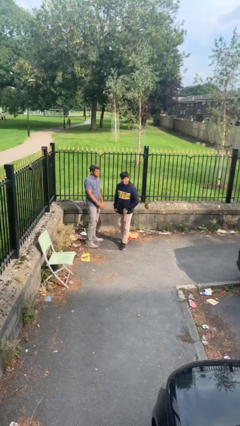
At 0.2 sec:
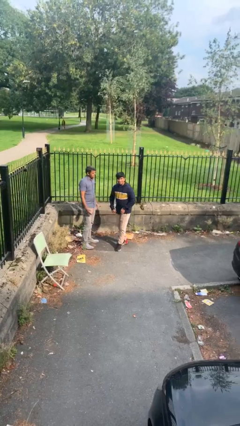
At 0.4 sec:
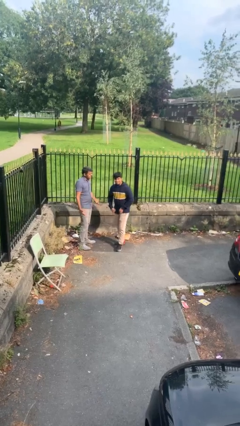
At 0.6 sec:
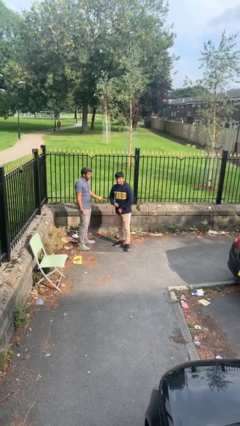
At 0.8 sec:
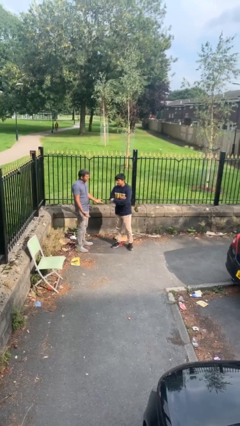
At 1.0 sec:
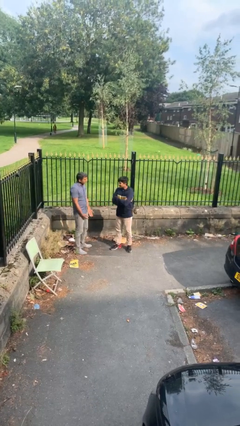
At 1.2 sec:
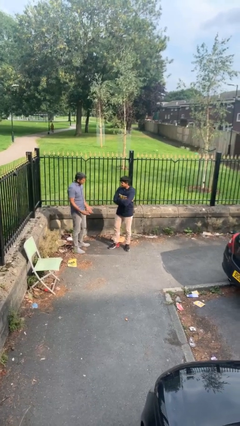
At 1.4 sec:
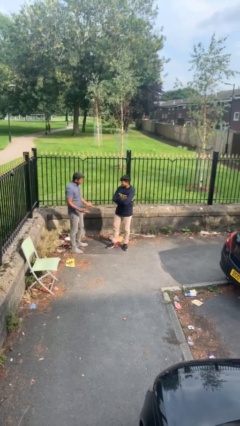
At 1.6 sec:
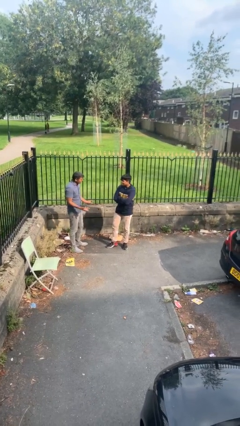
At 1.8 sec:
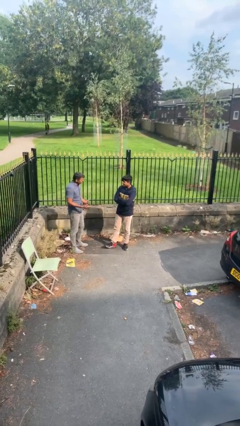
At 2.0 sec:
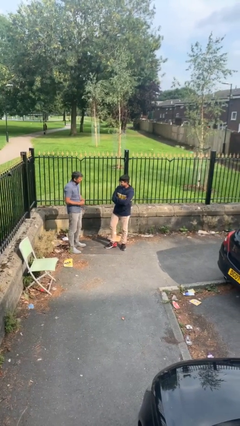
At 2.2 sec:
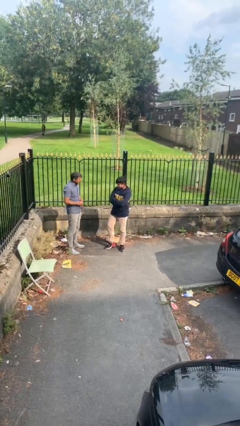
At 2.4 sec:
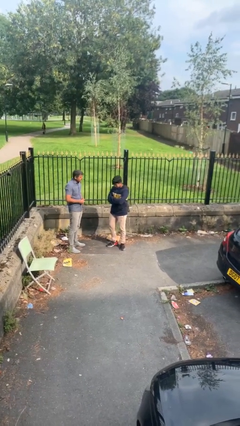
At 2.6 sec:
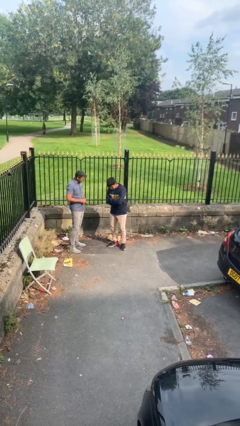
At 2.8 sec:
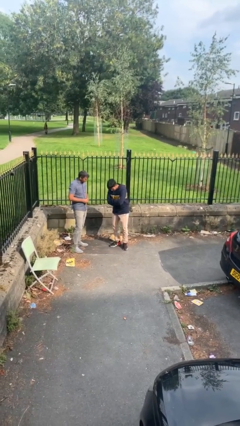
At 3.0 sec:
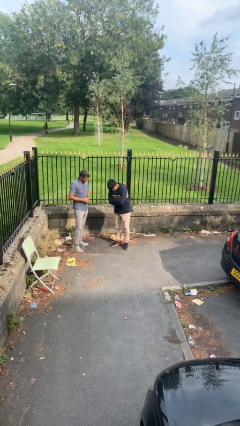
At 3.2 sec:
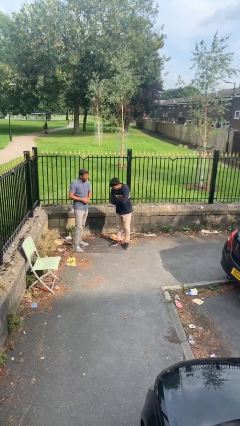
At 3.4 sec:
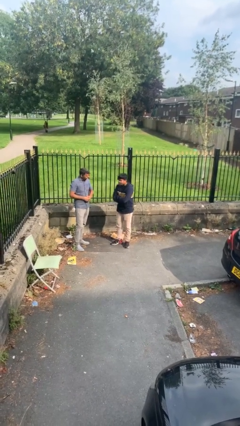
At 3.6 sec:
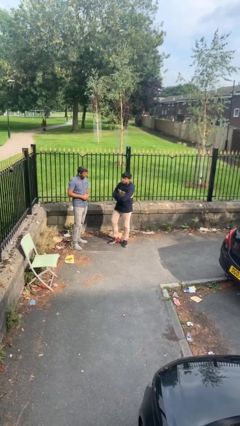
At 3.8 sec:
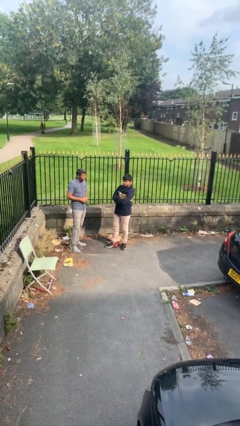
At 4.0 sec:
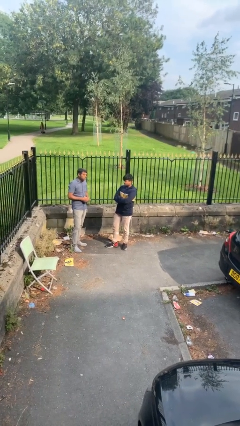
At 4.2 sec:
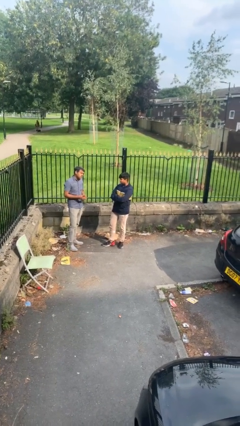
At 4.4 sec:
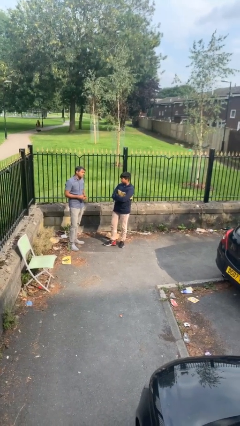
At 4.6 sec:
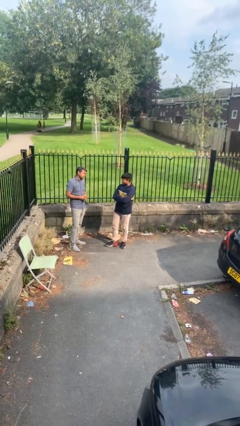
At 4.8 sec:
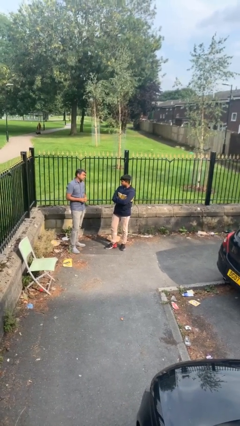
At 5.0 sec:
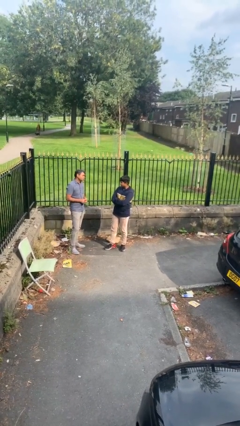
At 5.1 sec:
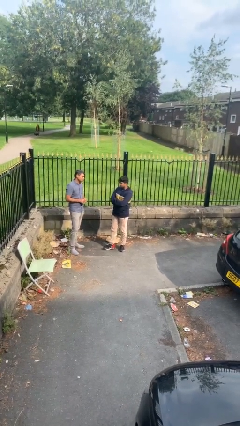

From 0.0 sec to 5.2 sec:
person talks to person

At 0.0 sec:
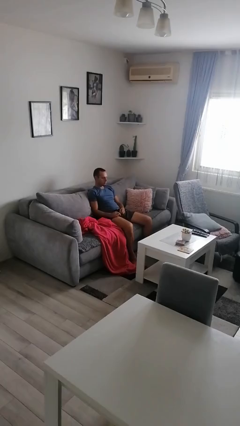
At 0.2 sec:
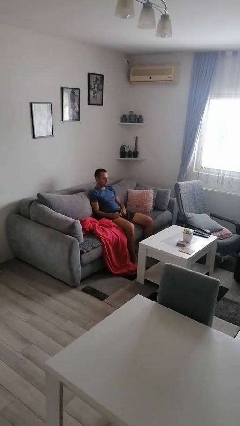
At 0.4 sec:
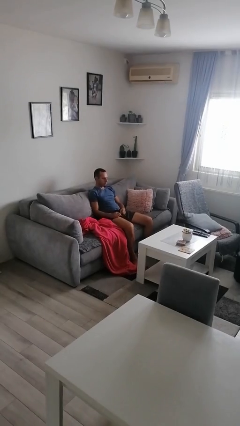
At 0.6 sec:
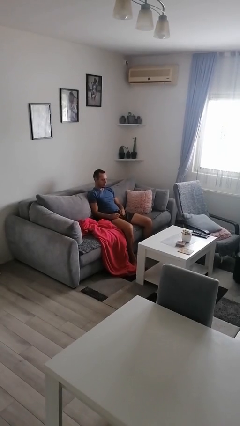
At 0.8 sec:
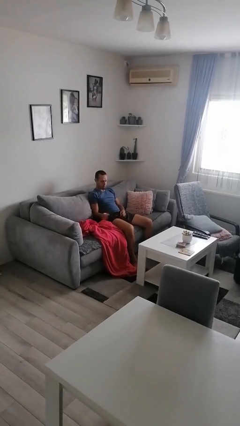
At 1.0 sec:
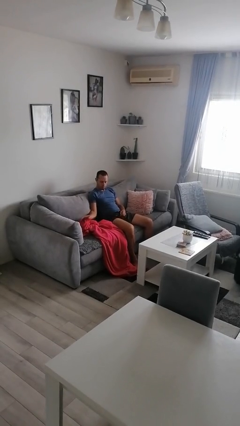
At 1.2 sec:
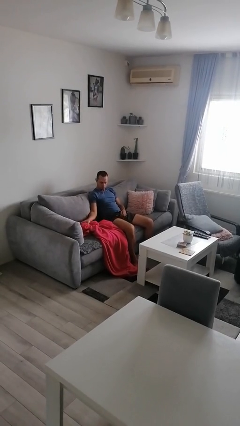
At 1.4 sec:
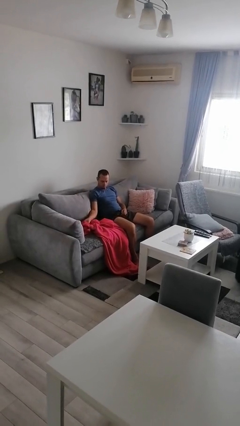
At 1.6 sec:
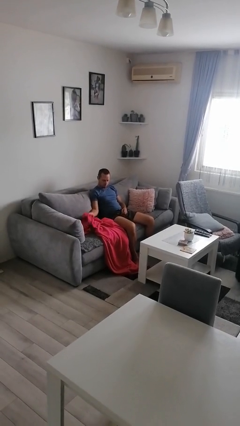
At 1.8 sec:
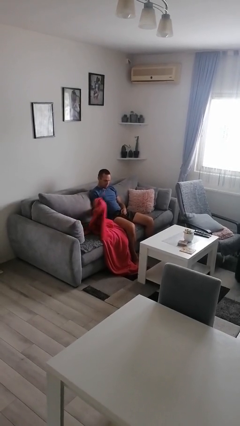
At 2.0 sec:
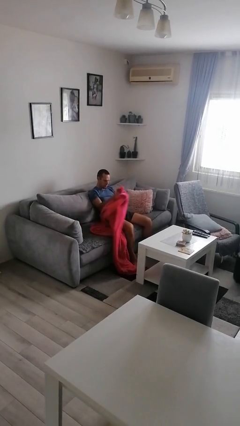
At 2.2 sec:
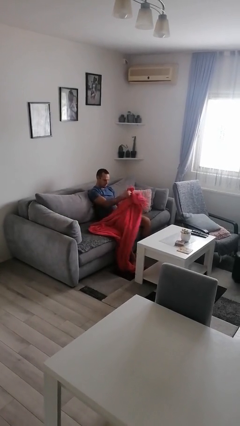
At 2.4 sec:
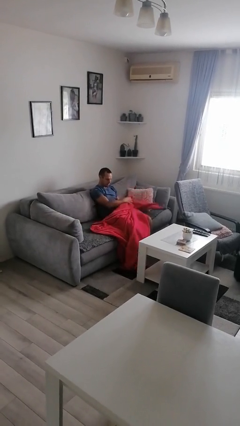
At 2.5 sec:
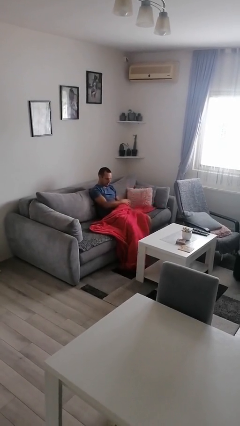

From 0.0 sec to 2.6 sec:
person covers with blanket

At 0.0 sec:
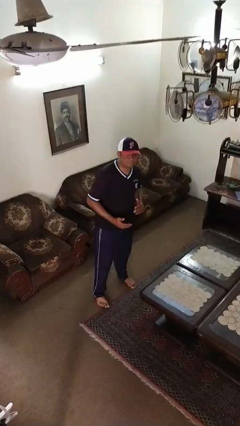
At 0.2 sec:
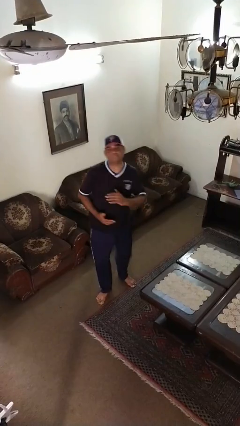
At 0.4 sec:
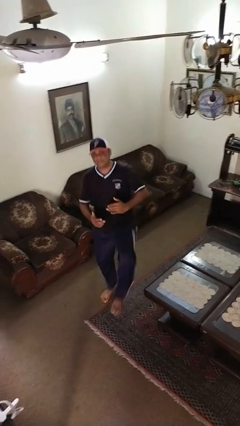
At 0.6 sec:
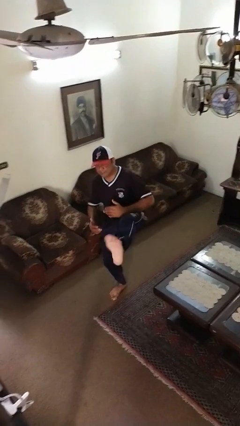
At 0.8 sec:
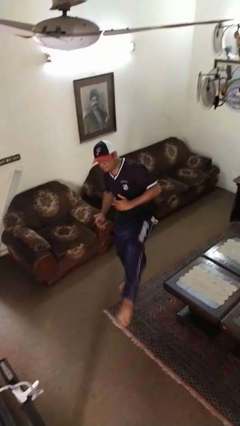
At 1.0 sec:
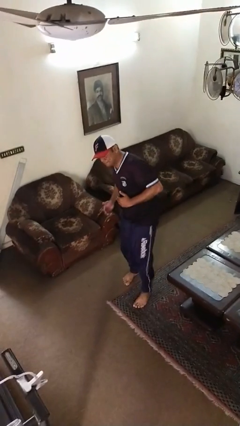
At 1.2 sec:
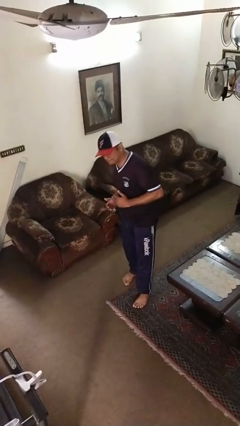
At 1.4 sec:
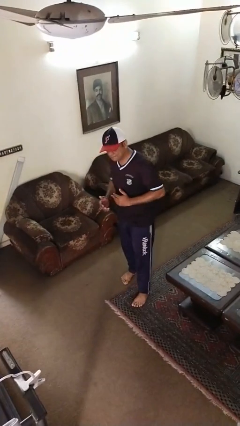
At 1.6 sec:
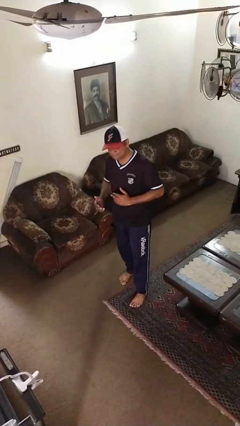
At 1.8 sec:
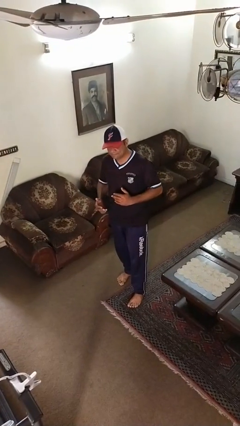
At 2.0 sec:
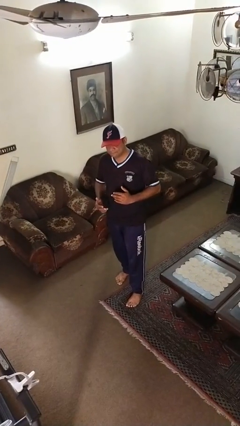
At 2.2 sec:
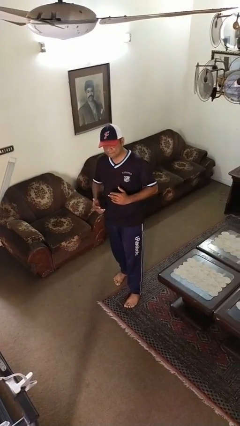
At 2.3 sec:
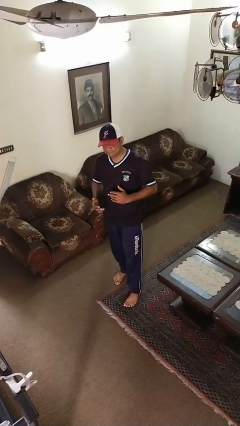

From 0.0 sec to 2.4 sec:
person karate kicks

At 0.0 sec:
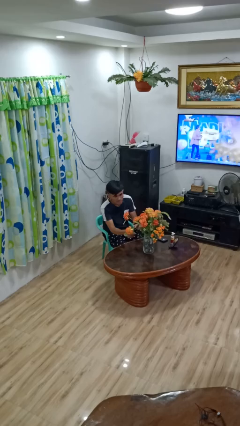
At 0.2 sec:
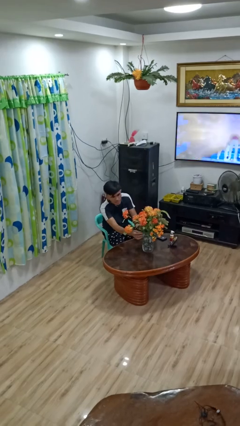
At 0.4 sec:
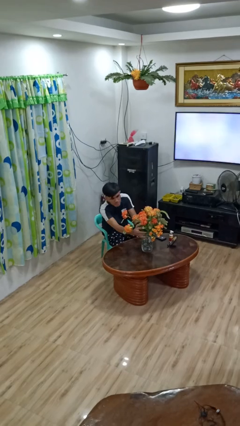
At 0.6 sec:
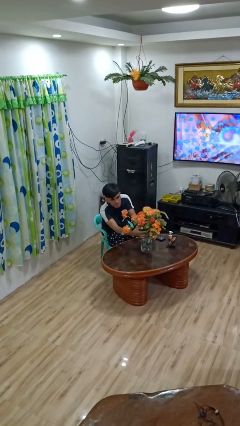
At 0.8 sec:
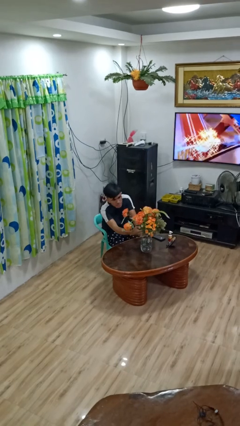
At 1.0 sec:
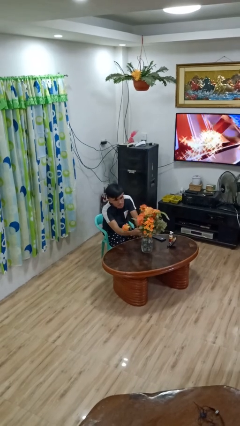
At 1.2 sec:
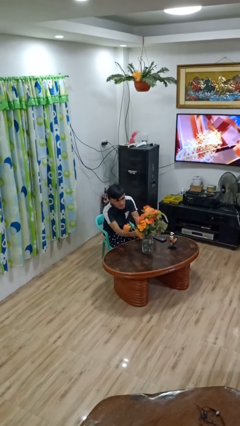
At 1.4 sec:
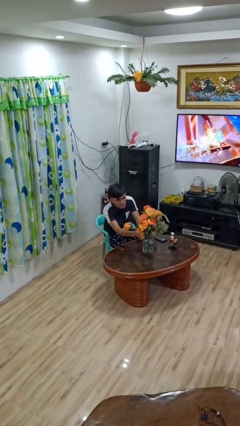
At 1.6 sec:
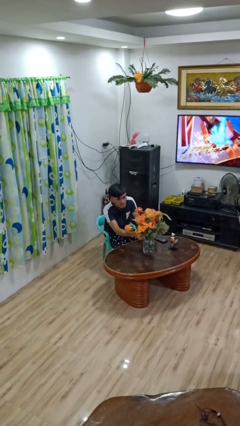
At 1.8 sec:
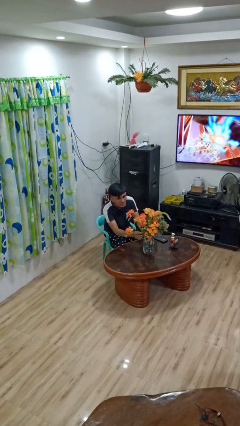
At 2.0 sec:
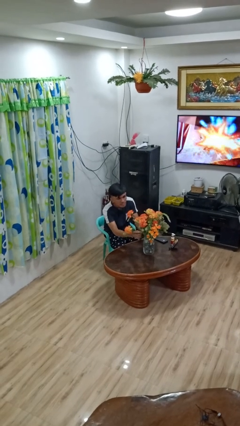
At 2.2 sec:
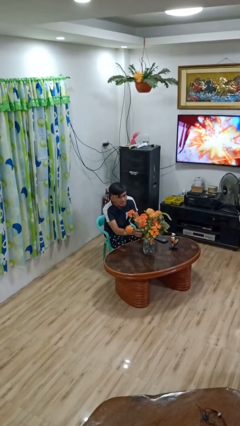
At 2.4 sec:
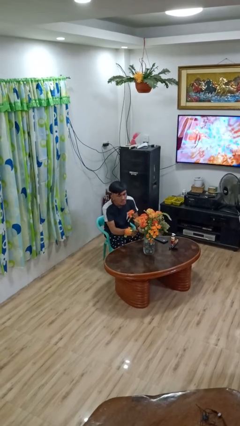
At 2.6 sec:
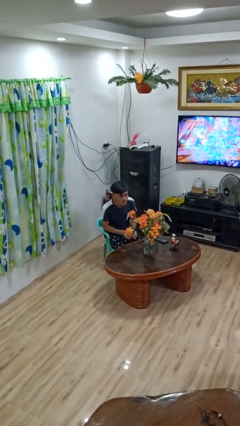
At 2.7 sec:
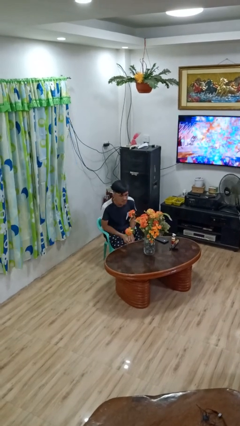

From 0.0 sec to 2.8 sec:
person arranges flowers in vase

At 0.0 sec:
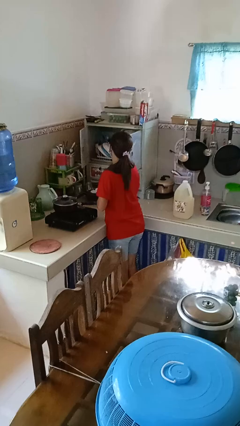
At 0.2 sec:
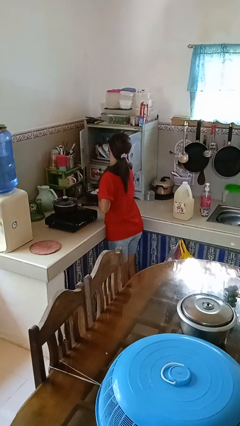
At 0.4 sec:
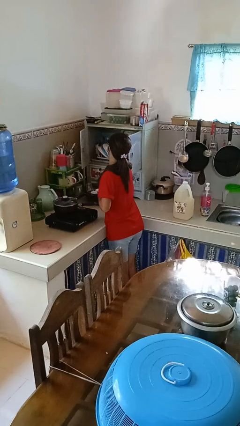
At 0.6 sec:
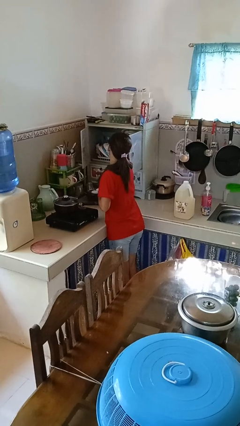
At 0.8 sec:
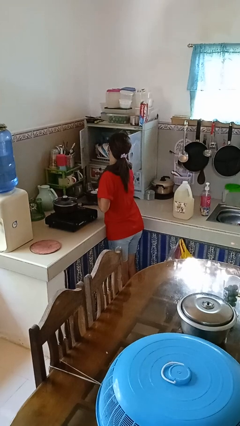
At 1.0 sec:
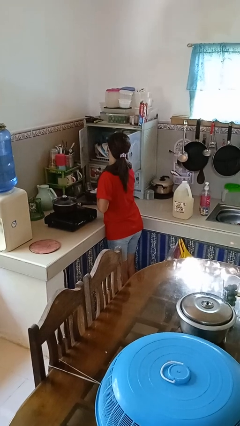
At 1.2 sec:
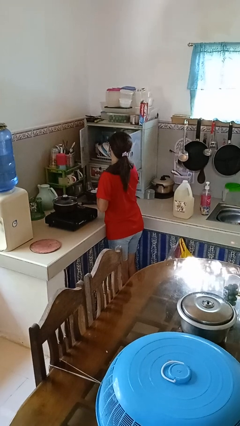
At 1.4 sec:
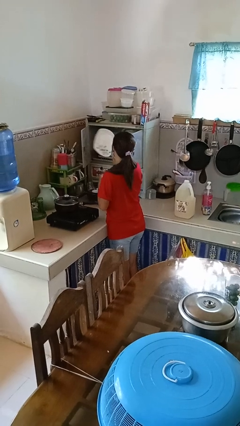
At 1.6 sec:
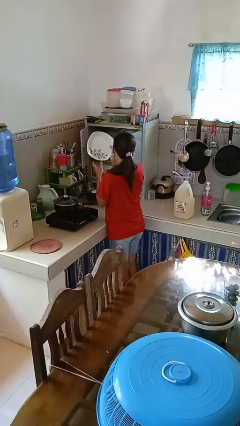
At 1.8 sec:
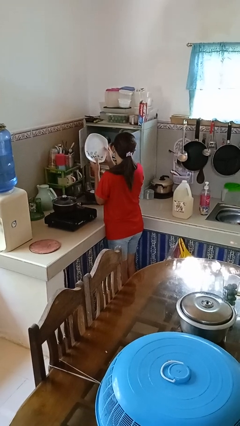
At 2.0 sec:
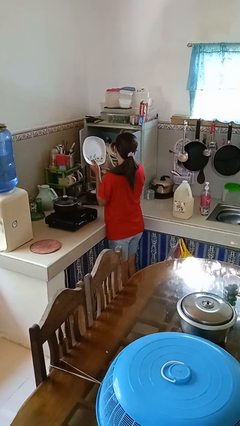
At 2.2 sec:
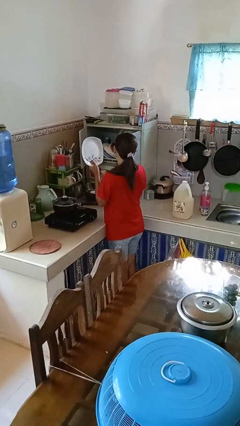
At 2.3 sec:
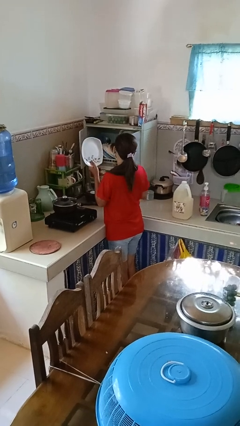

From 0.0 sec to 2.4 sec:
person takes object from cabinet

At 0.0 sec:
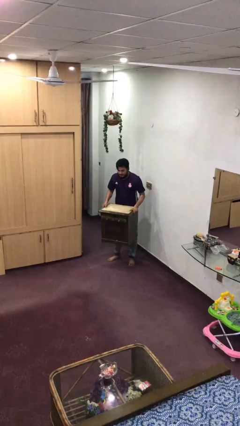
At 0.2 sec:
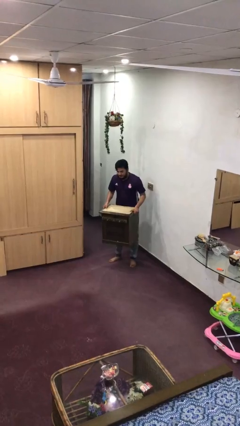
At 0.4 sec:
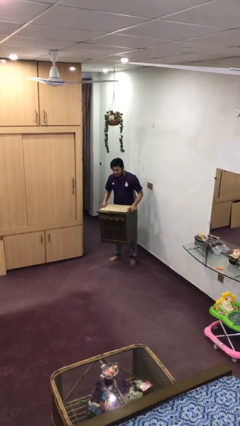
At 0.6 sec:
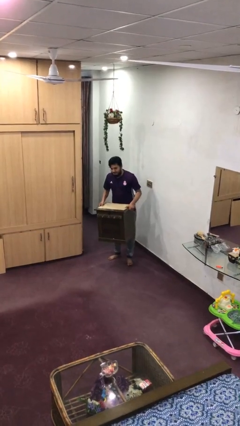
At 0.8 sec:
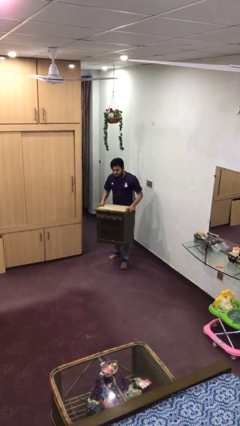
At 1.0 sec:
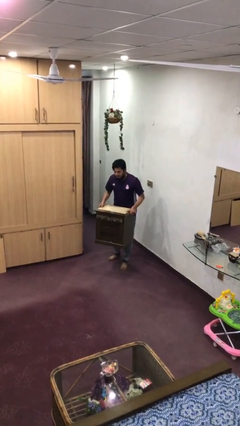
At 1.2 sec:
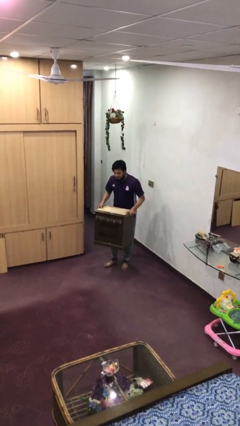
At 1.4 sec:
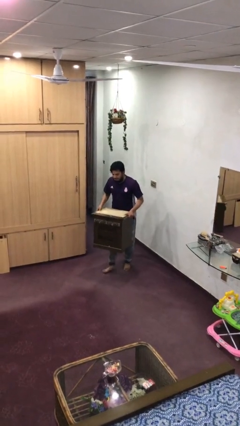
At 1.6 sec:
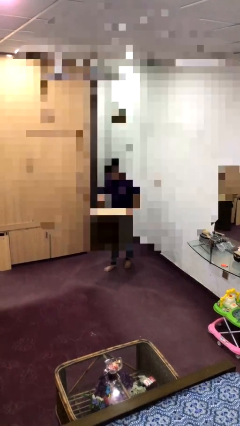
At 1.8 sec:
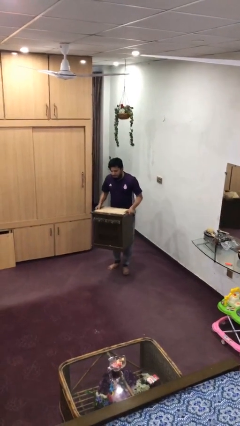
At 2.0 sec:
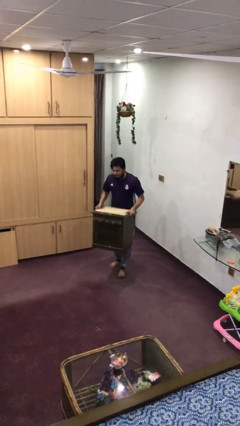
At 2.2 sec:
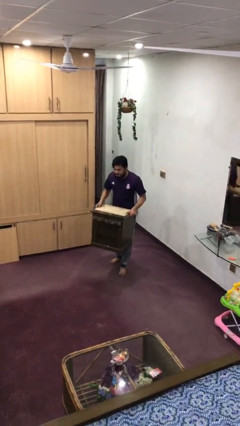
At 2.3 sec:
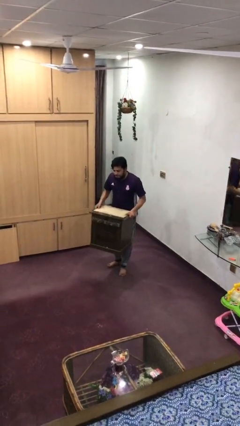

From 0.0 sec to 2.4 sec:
person carries heavy object
